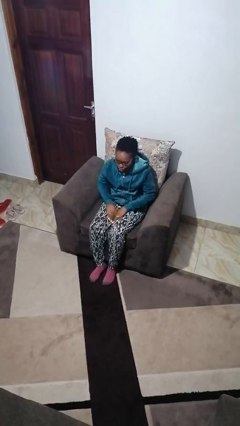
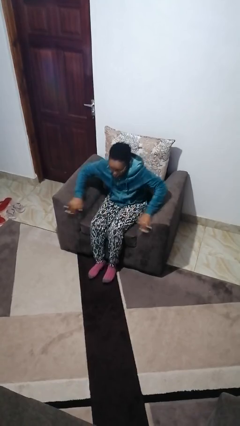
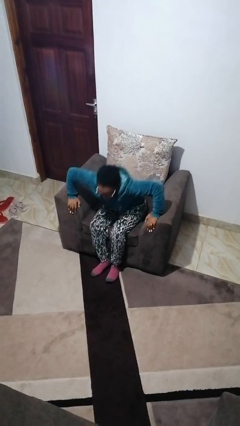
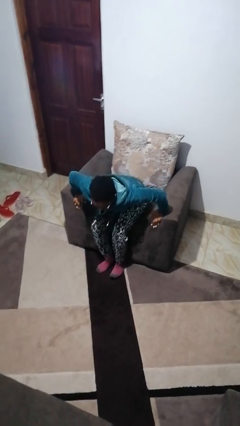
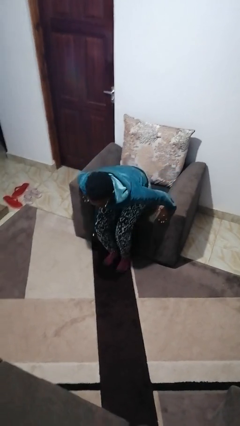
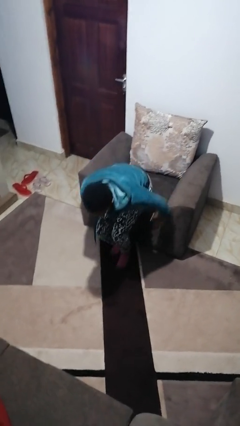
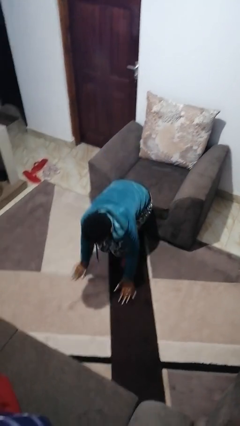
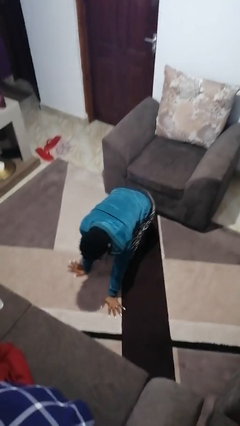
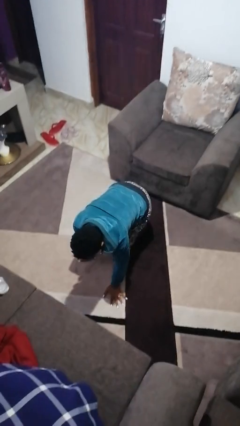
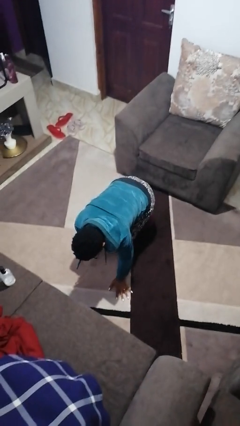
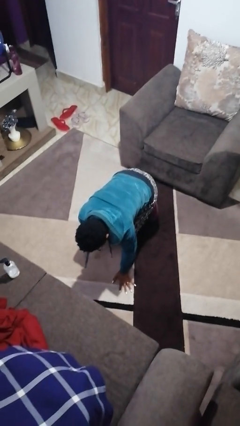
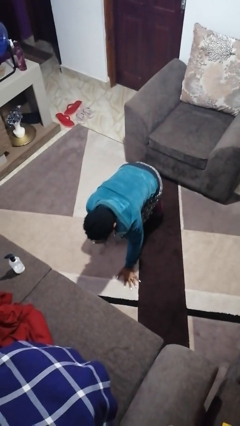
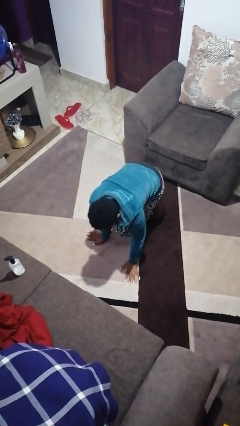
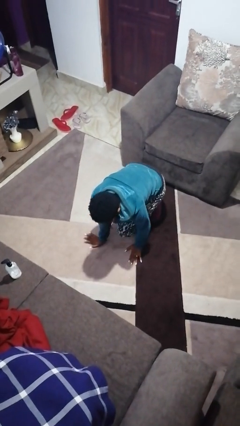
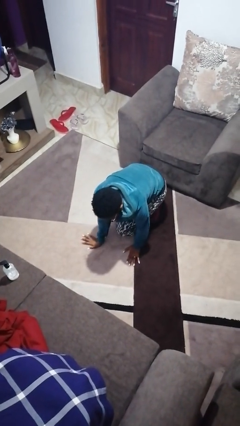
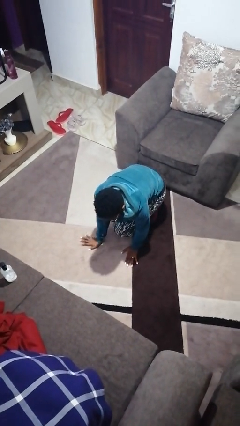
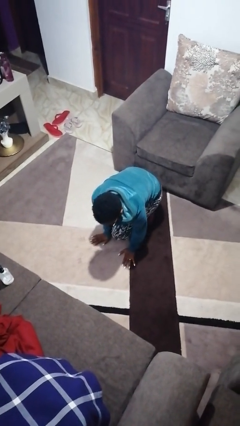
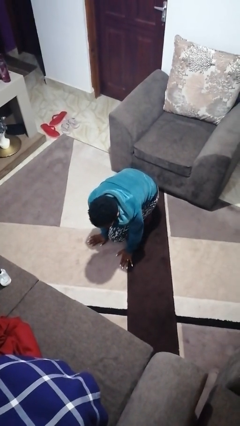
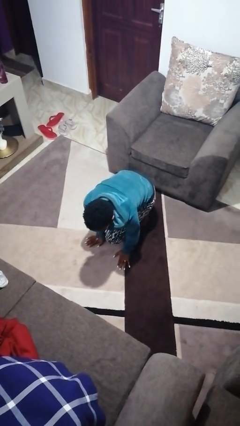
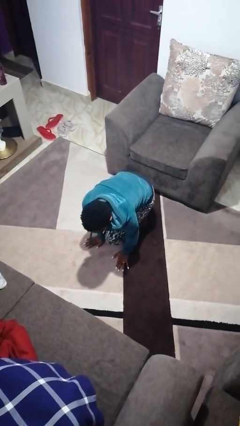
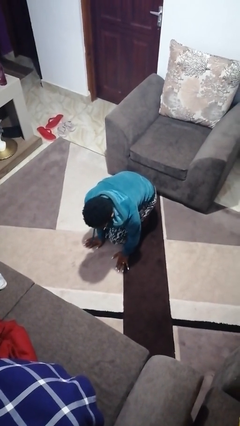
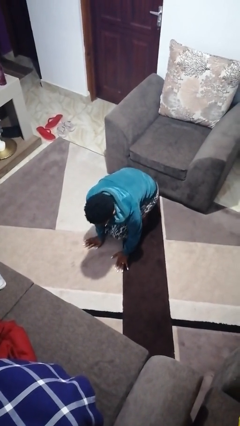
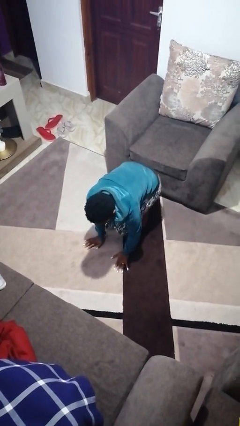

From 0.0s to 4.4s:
person falls from chair

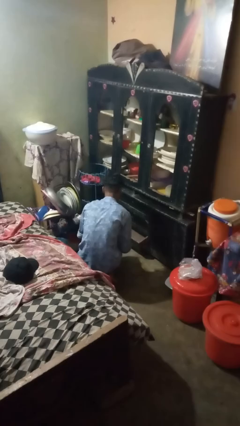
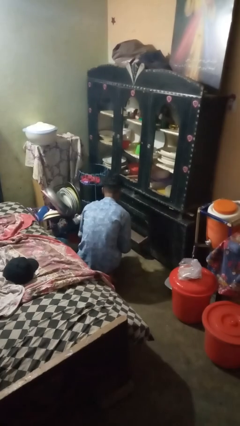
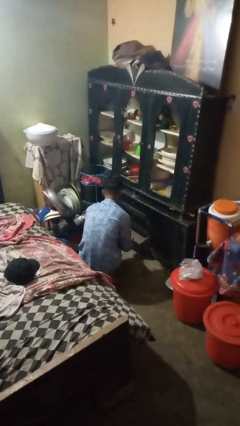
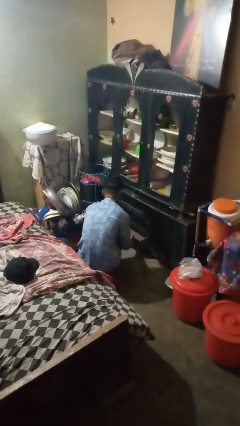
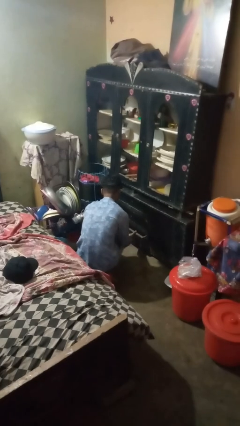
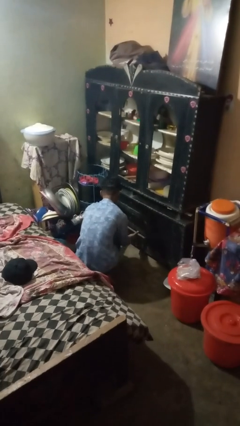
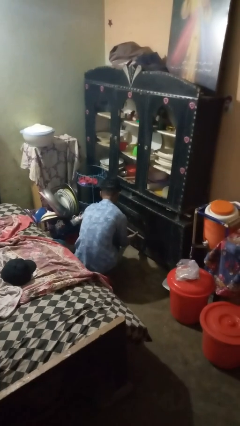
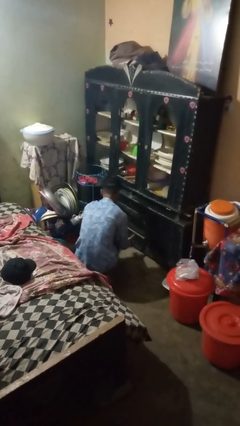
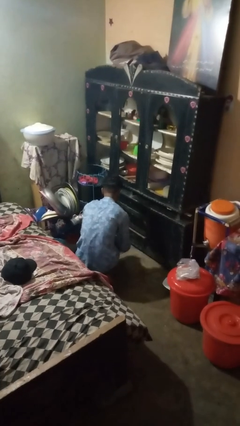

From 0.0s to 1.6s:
person closes kitchen drawer

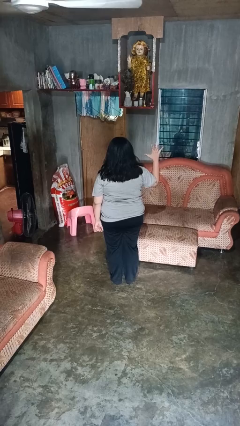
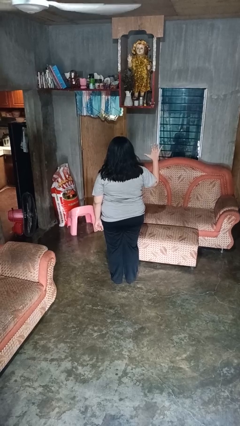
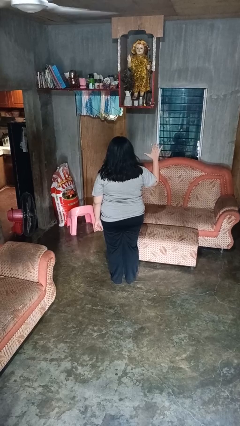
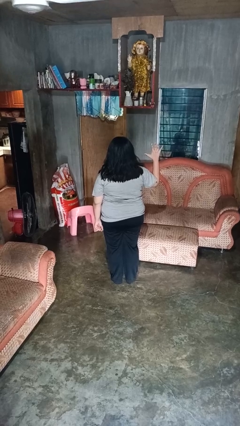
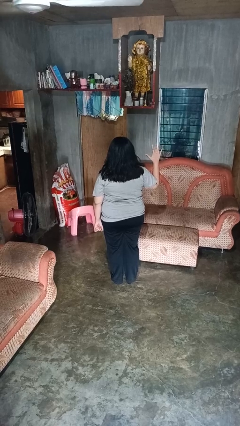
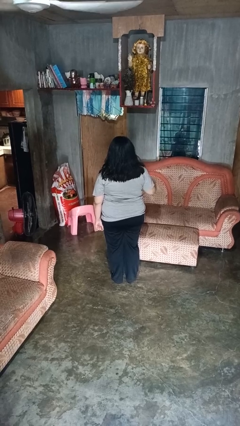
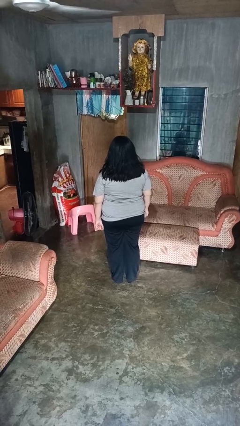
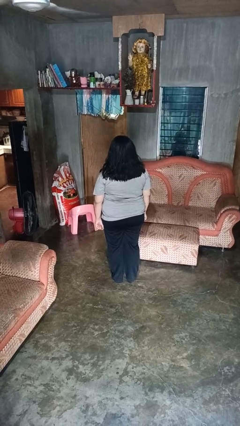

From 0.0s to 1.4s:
person gestures number five

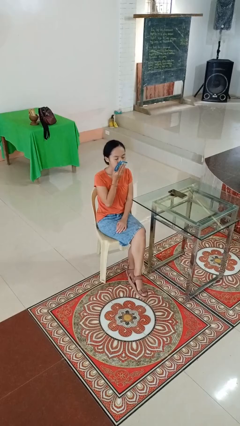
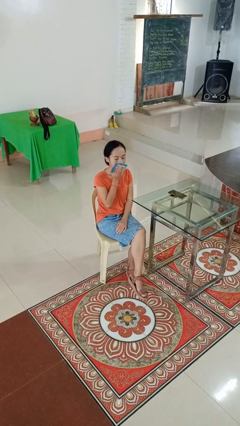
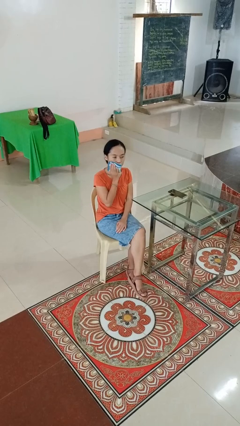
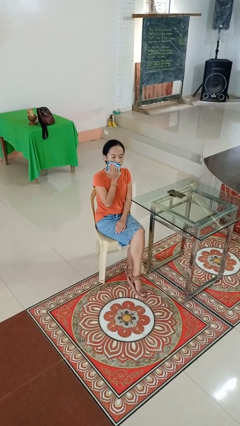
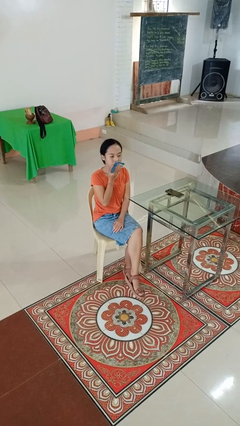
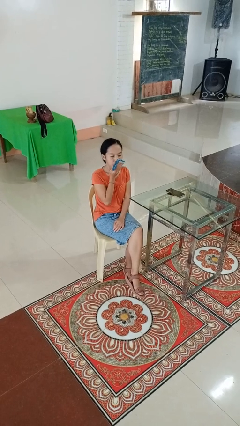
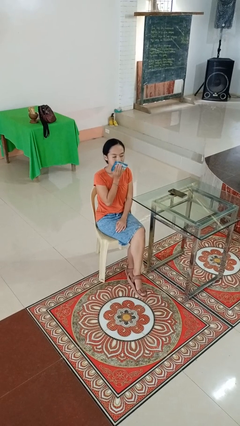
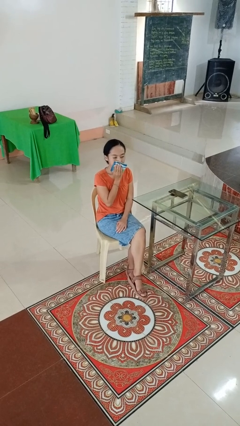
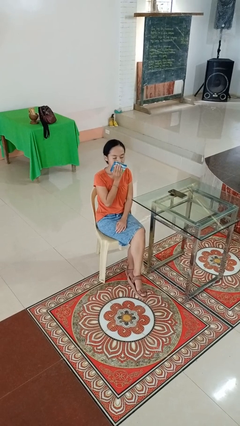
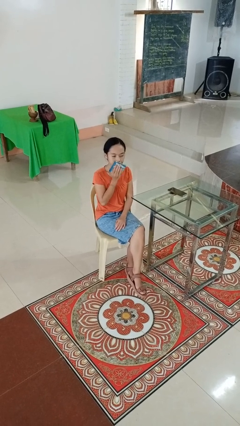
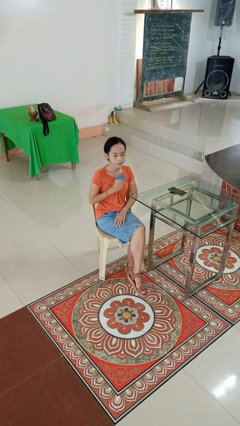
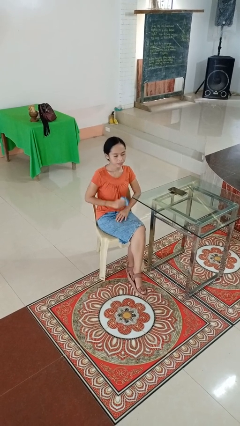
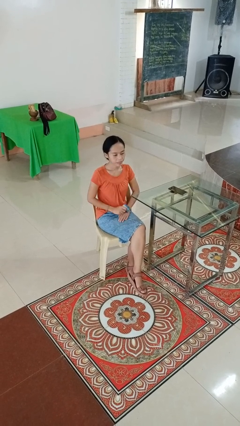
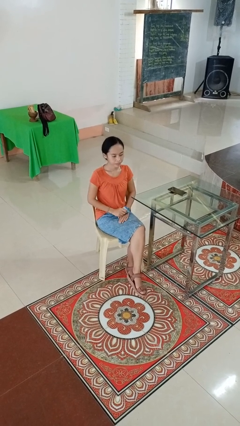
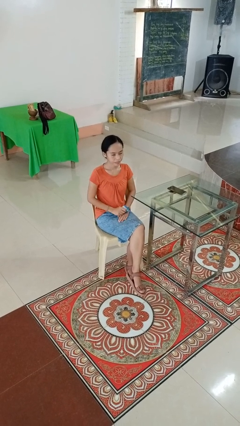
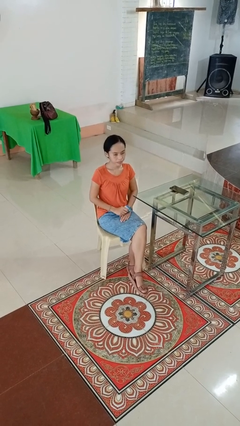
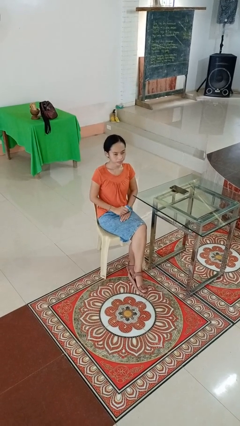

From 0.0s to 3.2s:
person wipes mouth with napkin

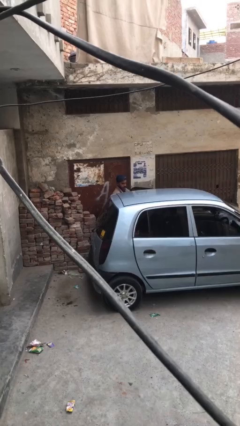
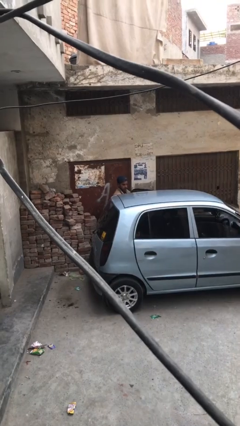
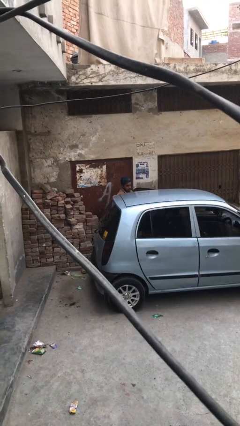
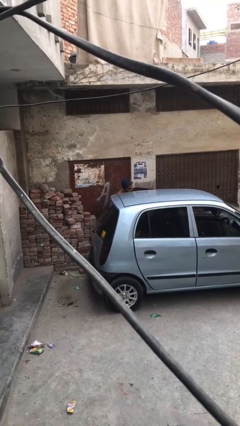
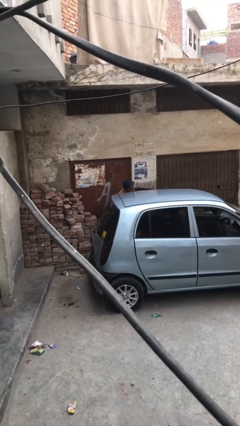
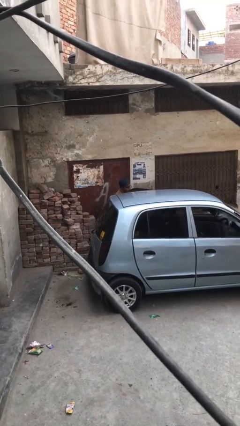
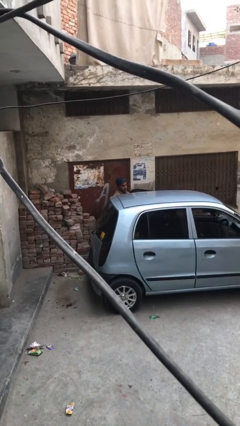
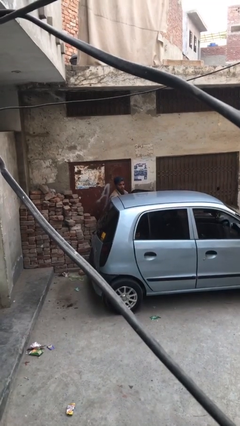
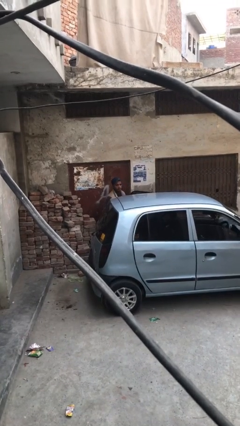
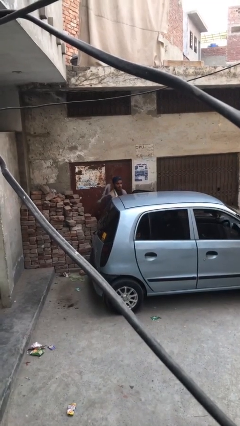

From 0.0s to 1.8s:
person unloads car

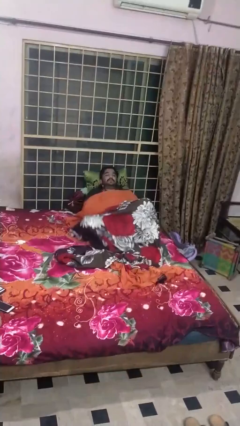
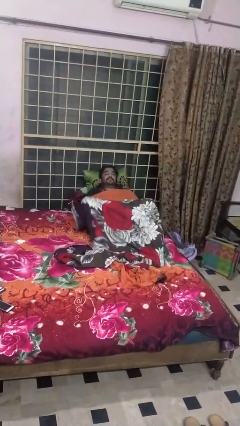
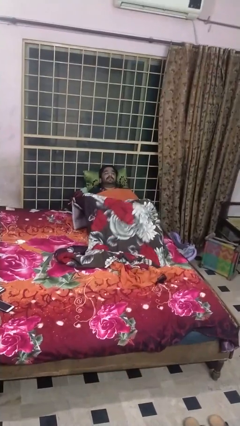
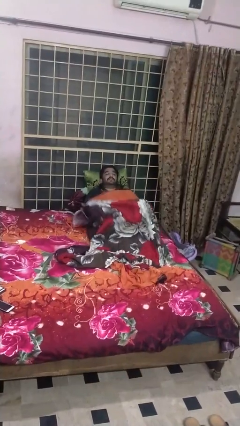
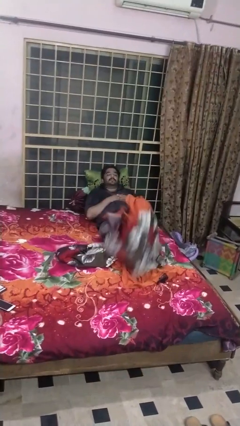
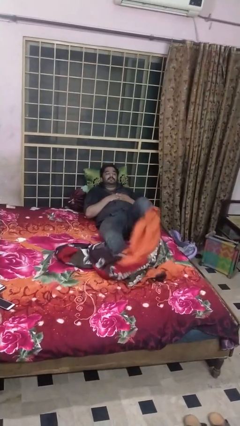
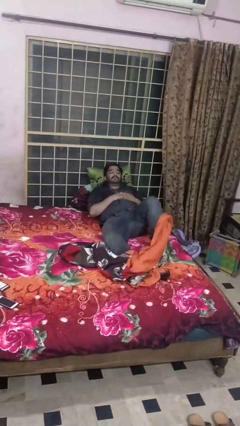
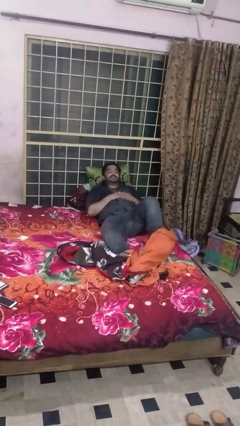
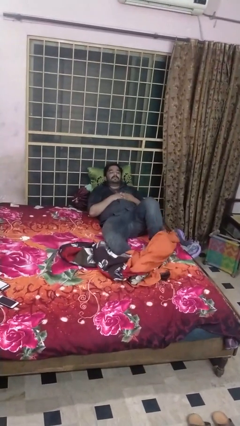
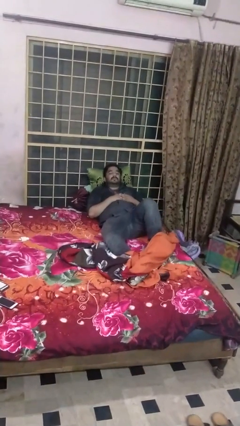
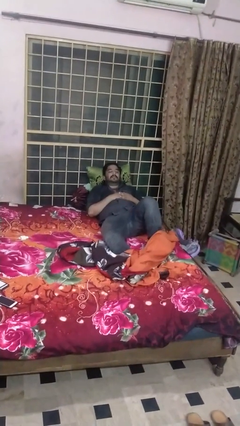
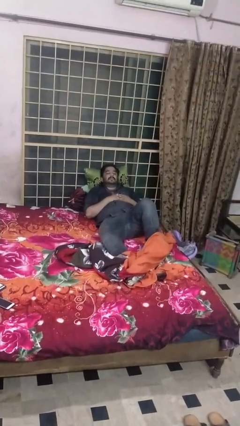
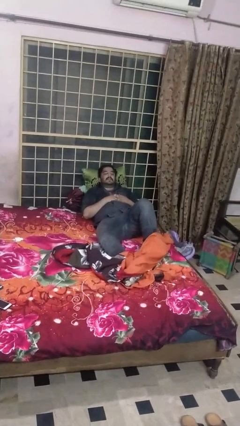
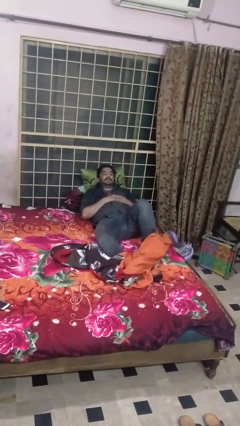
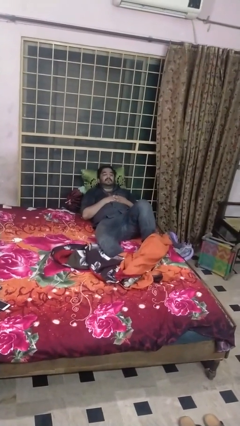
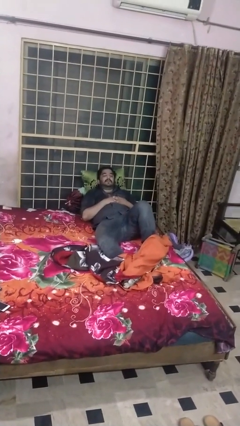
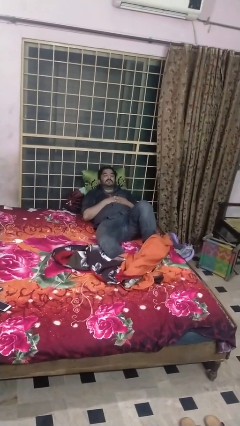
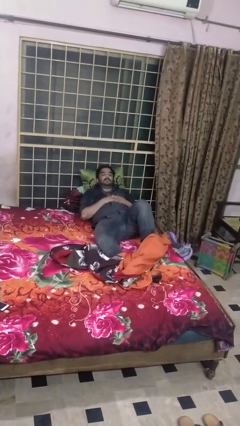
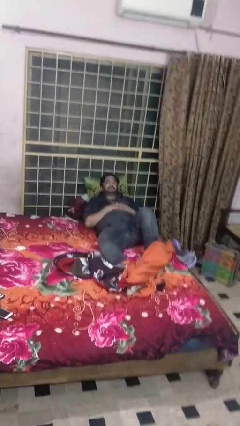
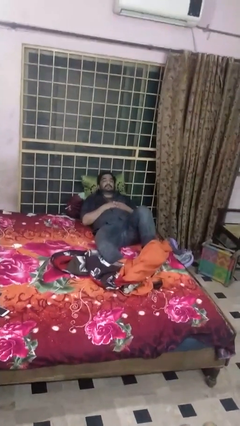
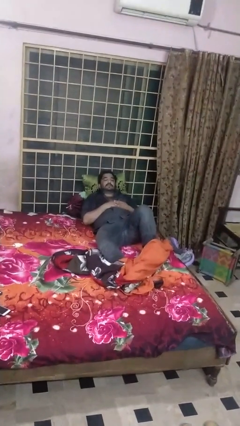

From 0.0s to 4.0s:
person uncovers with bedsheets

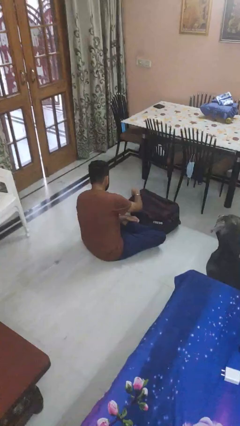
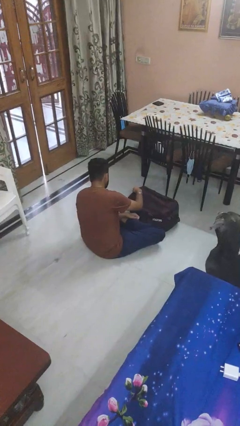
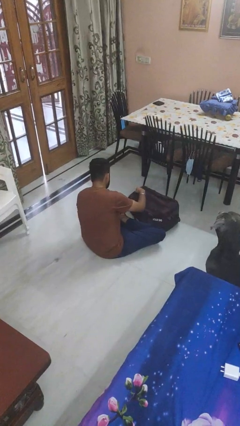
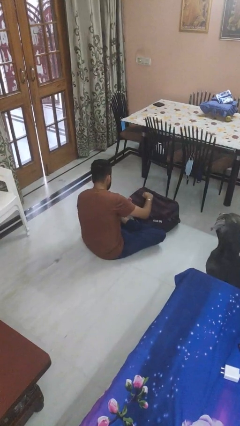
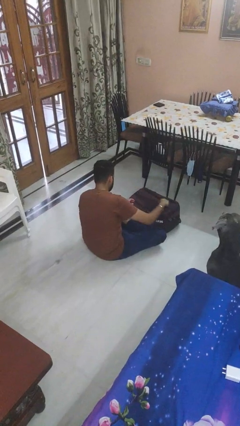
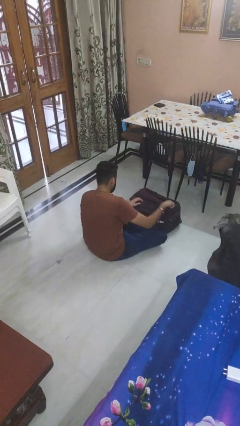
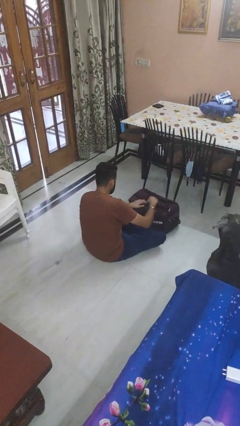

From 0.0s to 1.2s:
person opens suitcase
